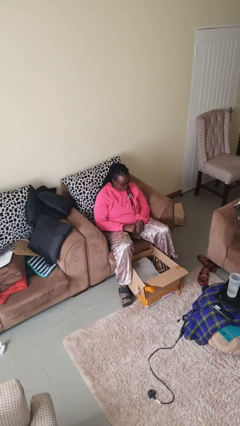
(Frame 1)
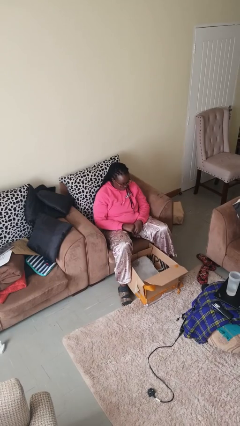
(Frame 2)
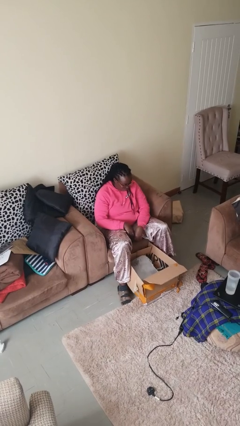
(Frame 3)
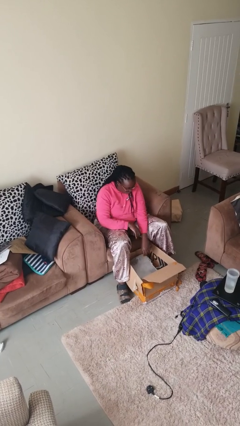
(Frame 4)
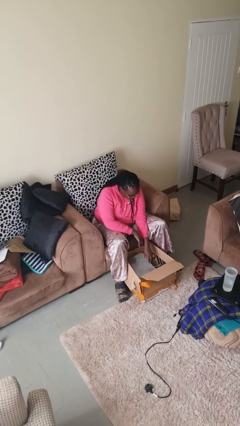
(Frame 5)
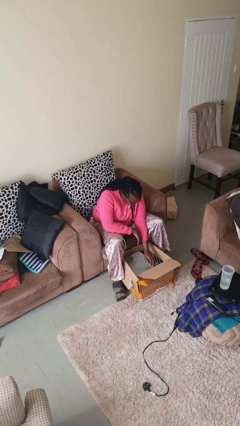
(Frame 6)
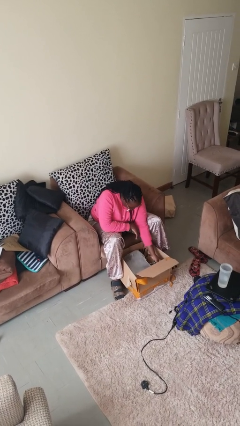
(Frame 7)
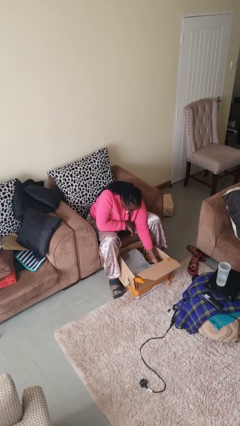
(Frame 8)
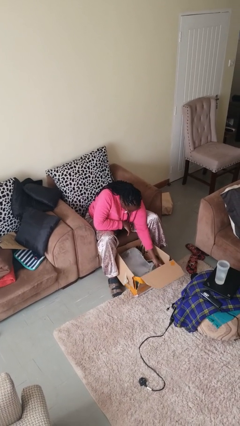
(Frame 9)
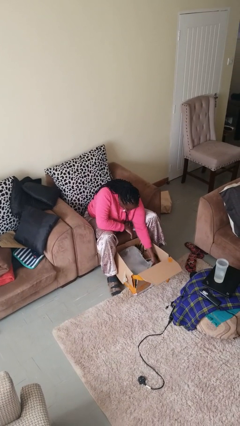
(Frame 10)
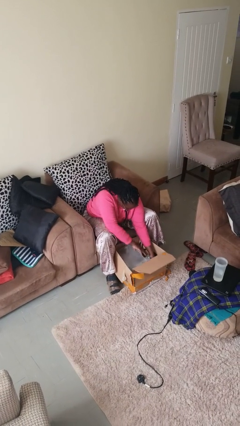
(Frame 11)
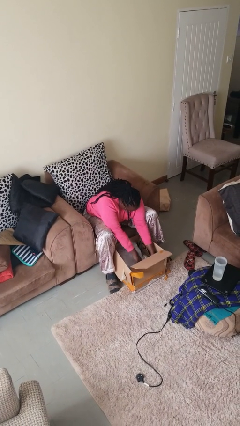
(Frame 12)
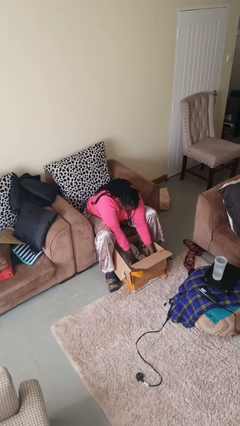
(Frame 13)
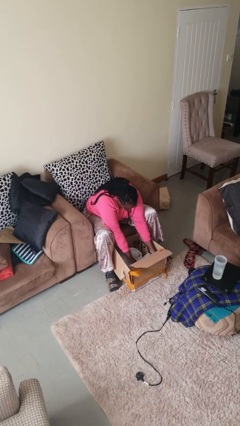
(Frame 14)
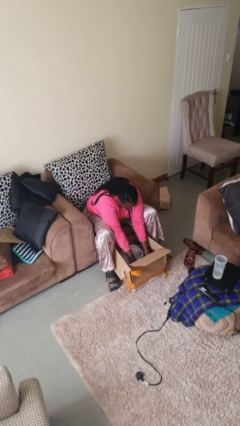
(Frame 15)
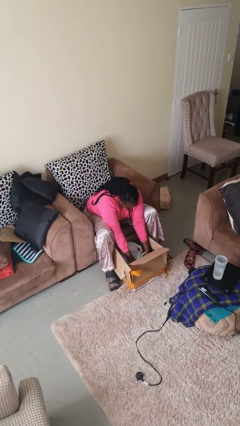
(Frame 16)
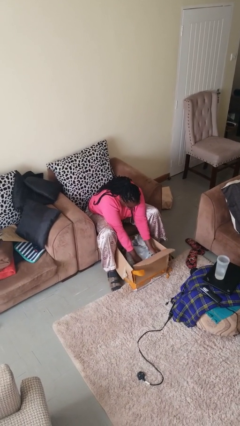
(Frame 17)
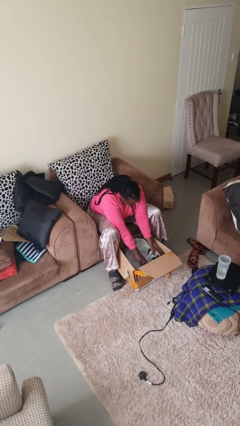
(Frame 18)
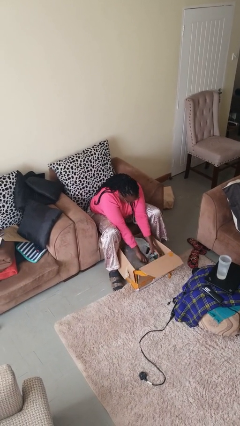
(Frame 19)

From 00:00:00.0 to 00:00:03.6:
person searches in box

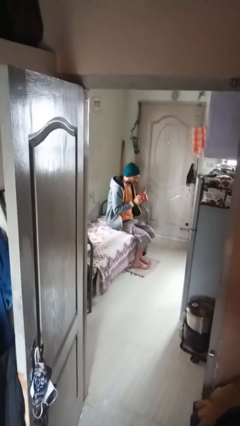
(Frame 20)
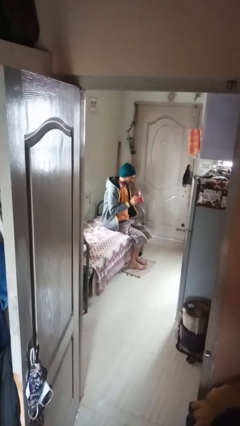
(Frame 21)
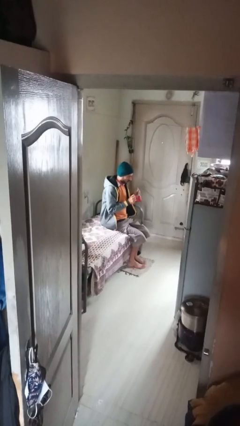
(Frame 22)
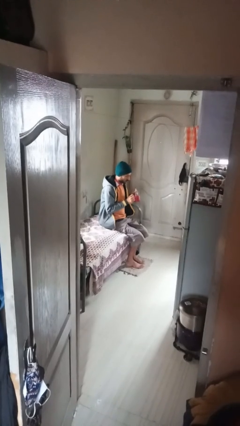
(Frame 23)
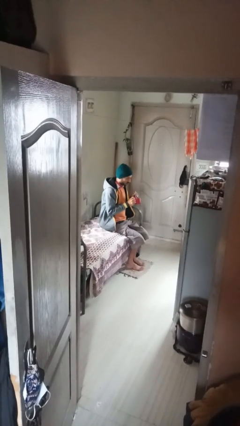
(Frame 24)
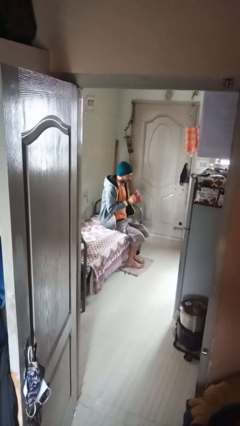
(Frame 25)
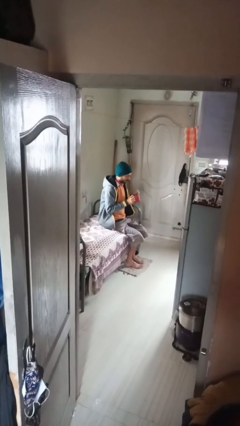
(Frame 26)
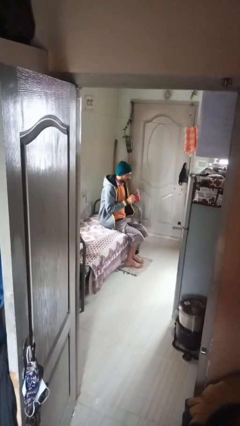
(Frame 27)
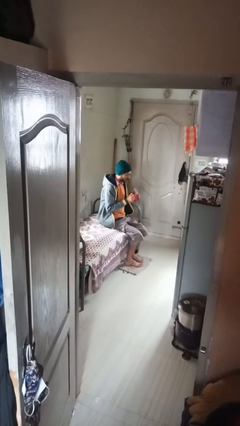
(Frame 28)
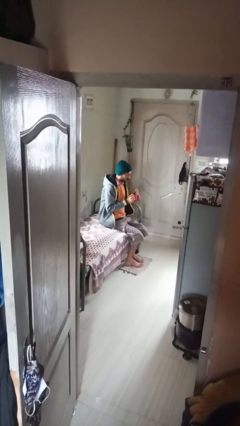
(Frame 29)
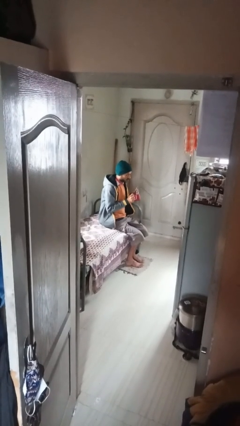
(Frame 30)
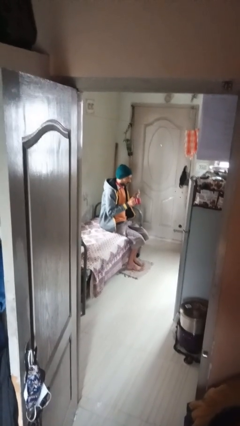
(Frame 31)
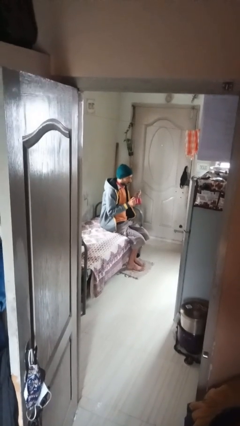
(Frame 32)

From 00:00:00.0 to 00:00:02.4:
person stirs mug

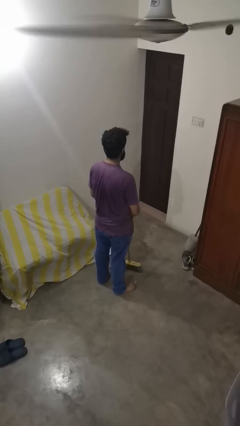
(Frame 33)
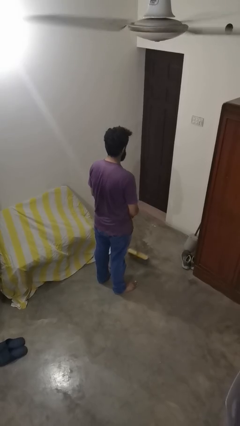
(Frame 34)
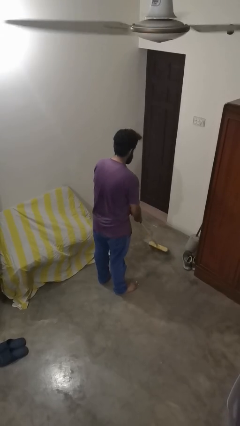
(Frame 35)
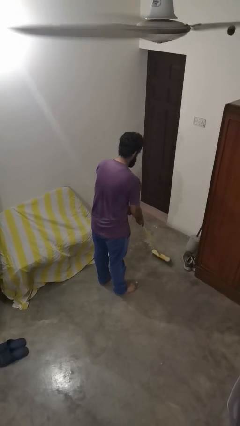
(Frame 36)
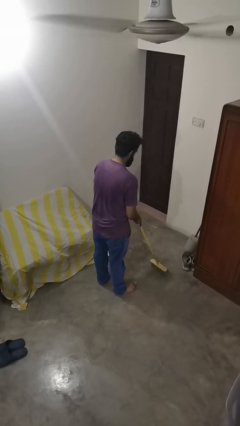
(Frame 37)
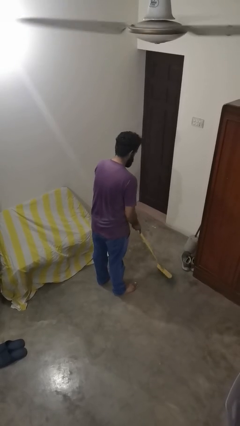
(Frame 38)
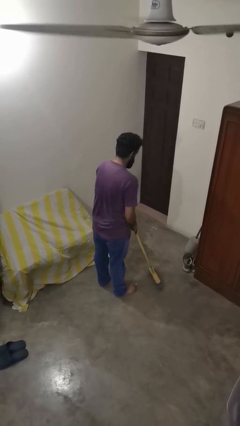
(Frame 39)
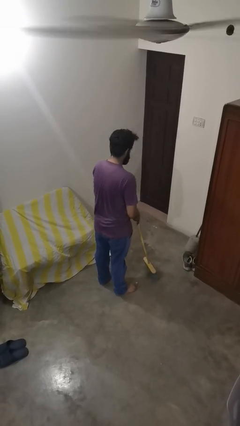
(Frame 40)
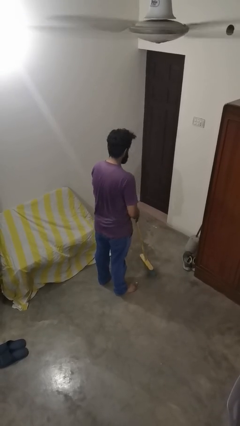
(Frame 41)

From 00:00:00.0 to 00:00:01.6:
person sweeps floor

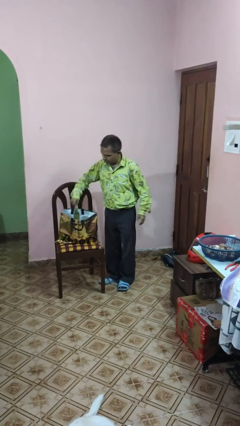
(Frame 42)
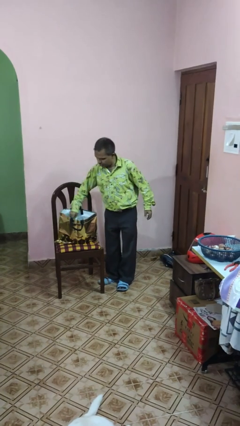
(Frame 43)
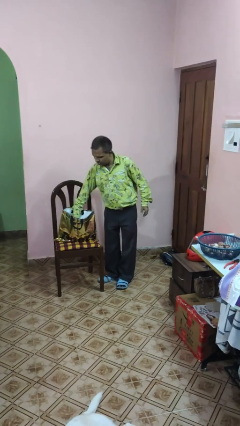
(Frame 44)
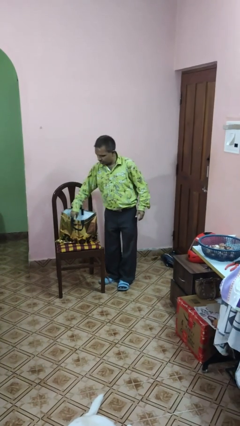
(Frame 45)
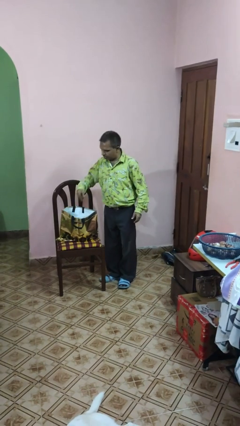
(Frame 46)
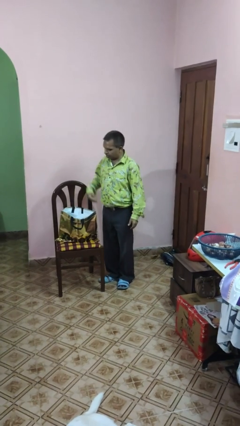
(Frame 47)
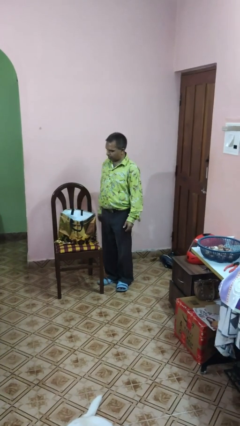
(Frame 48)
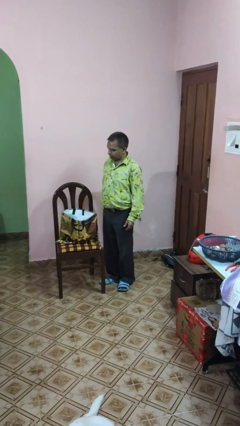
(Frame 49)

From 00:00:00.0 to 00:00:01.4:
person puts object into bag

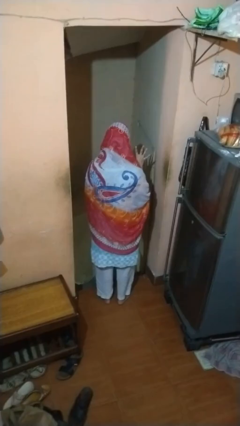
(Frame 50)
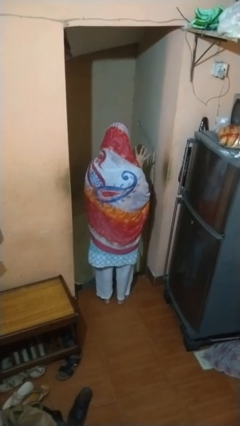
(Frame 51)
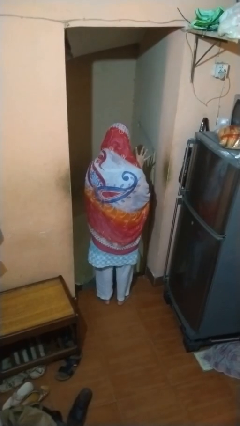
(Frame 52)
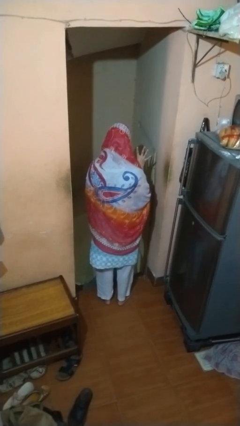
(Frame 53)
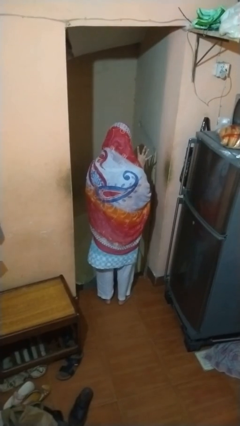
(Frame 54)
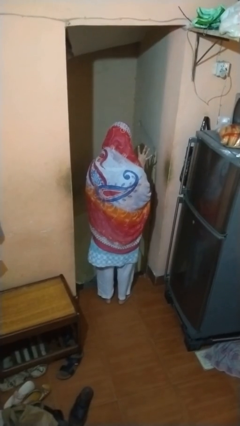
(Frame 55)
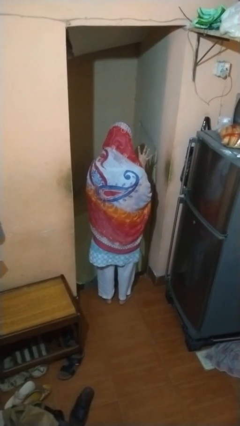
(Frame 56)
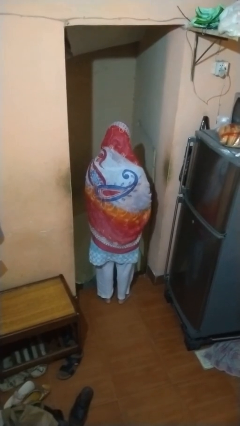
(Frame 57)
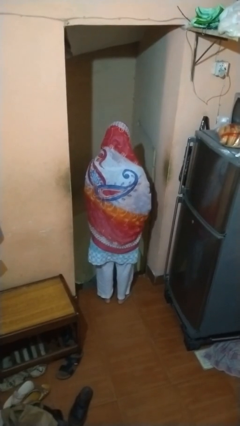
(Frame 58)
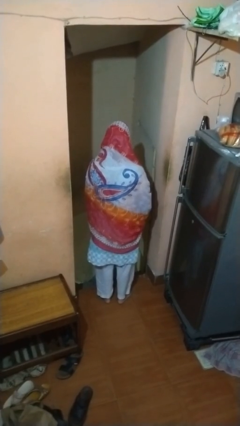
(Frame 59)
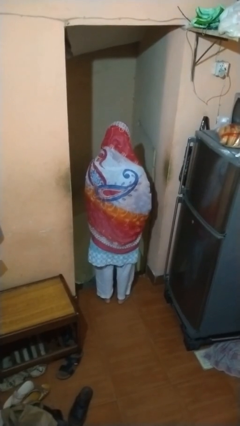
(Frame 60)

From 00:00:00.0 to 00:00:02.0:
person gestures number four

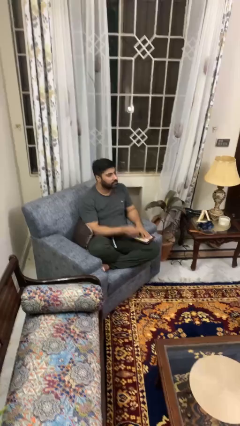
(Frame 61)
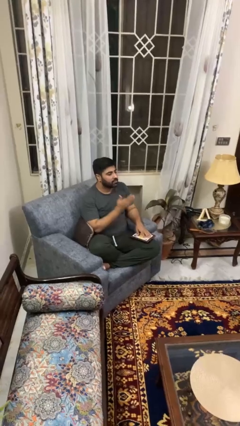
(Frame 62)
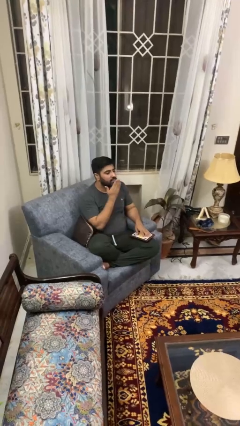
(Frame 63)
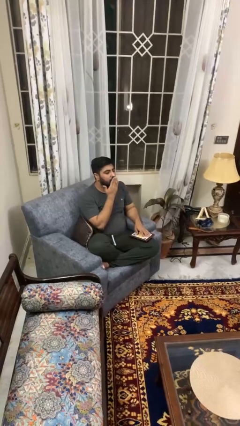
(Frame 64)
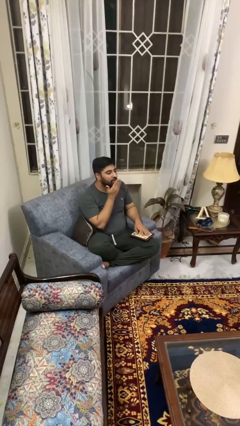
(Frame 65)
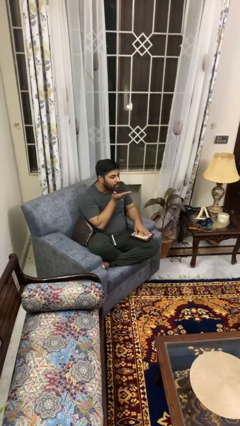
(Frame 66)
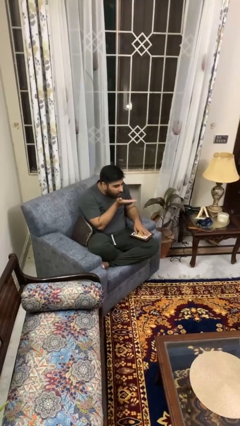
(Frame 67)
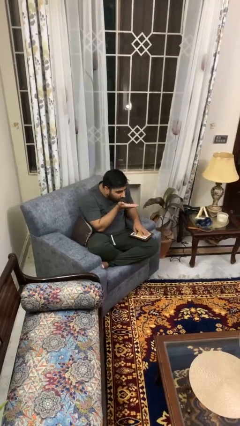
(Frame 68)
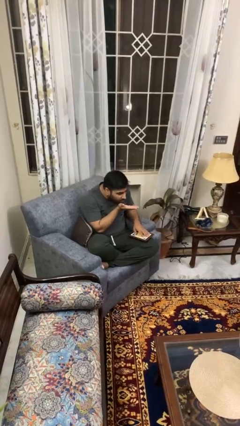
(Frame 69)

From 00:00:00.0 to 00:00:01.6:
person gestures blow kiss

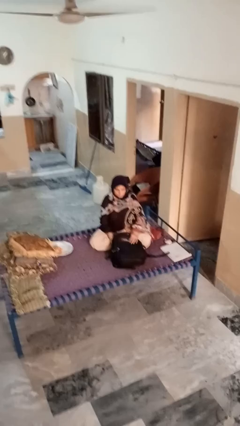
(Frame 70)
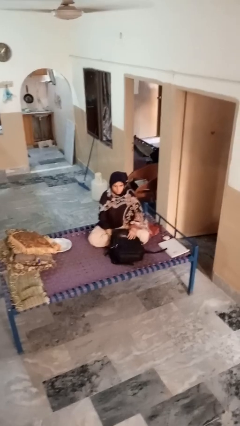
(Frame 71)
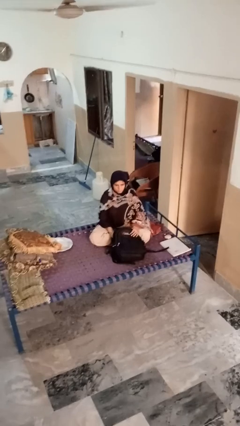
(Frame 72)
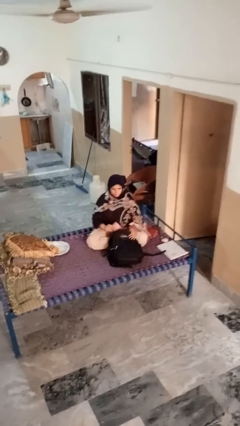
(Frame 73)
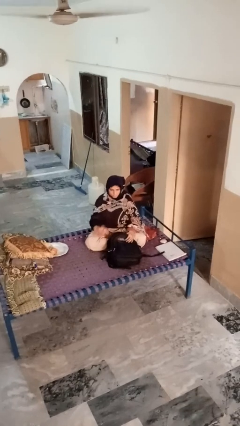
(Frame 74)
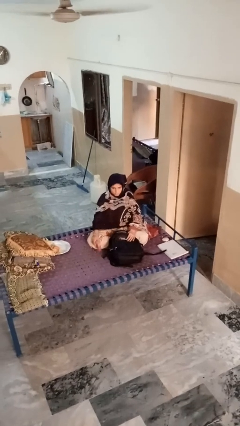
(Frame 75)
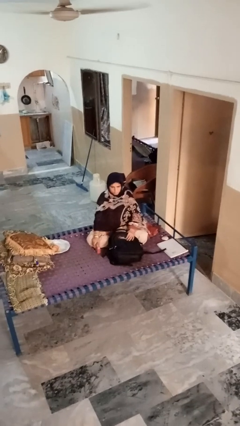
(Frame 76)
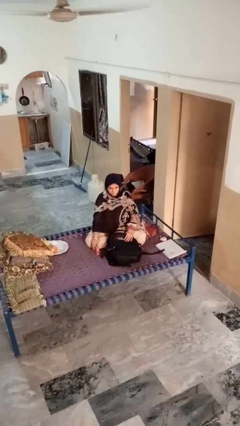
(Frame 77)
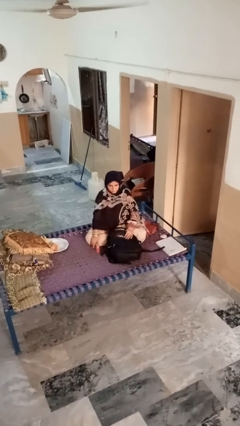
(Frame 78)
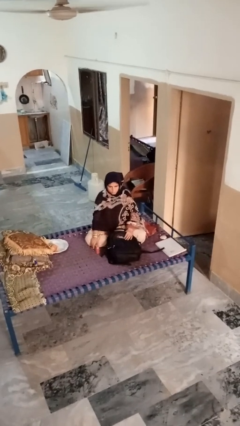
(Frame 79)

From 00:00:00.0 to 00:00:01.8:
person takes object from bag

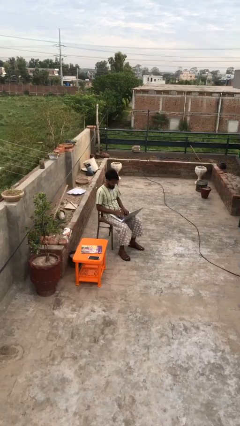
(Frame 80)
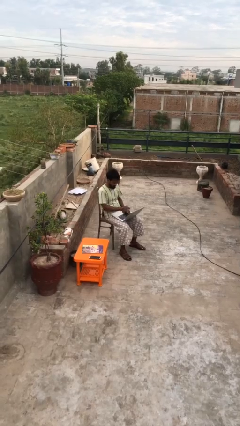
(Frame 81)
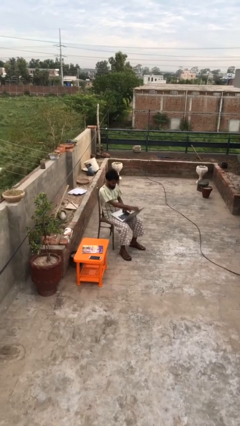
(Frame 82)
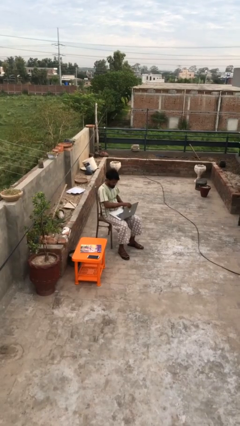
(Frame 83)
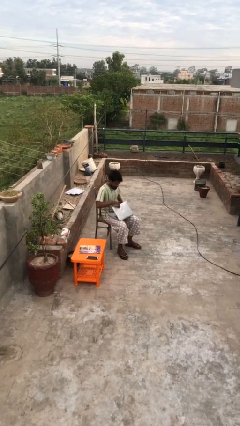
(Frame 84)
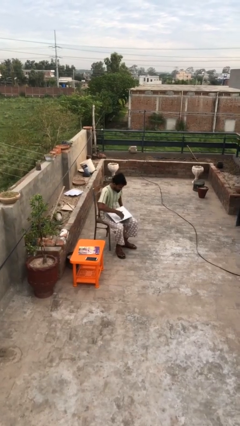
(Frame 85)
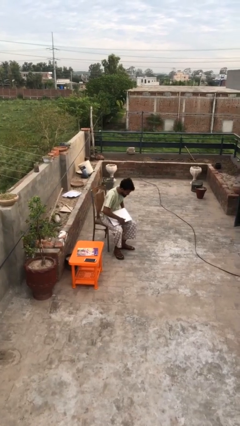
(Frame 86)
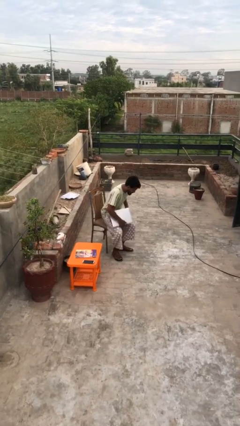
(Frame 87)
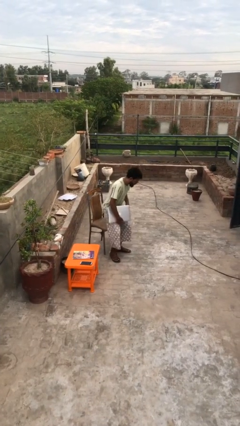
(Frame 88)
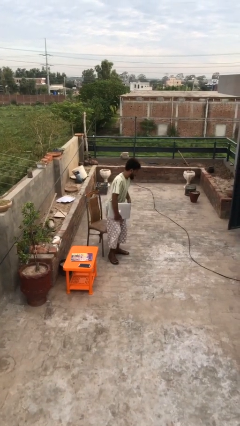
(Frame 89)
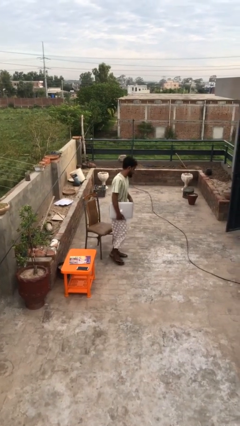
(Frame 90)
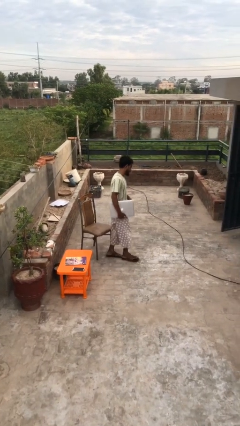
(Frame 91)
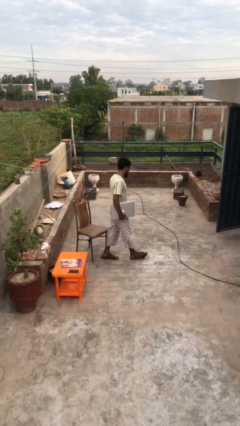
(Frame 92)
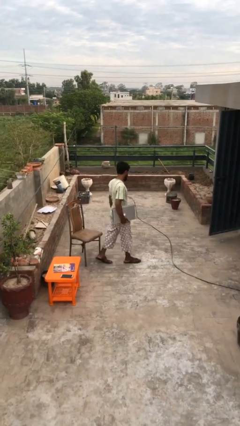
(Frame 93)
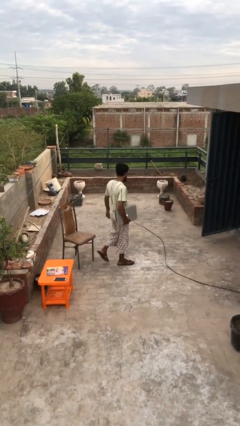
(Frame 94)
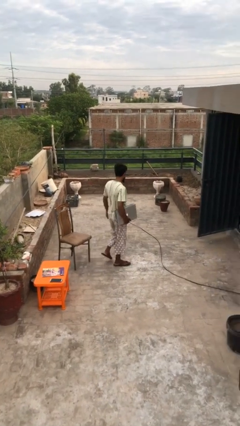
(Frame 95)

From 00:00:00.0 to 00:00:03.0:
person stands up
